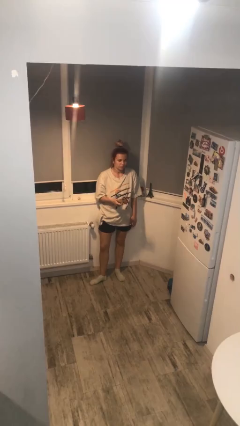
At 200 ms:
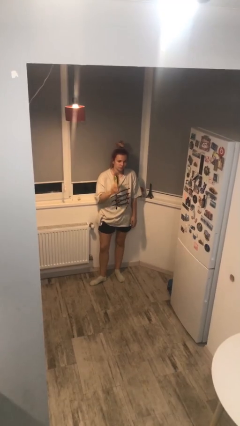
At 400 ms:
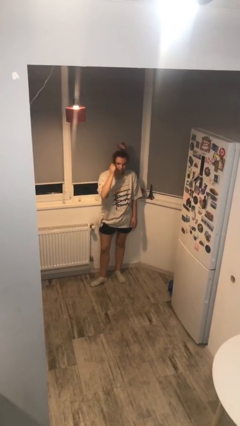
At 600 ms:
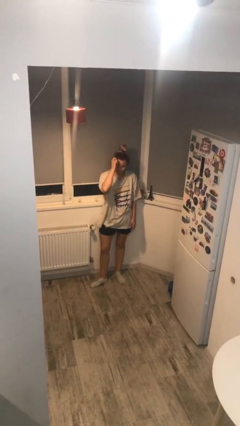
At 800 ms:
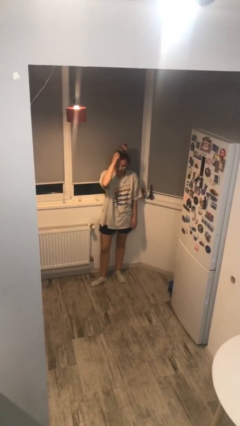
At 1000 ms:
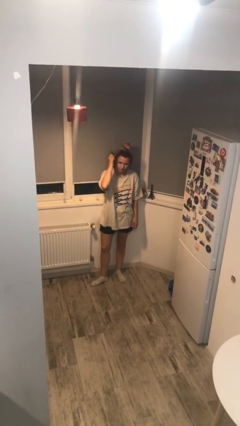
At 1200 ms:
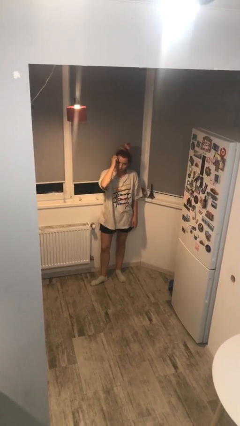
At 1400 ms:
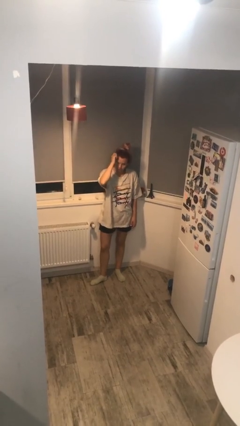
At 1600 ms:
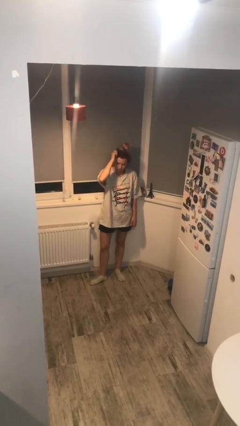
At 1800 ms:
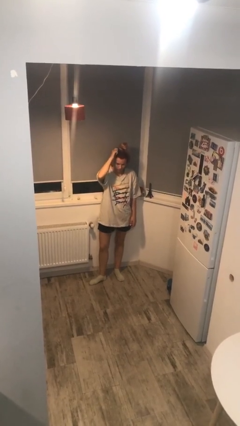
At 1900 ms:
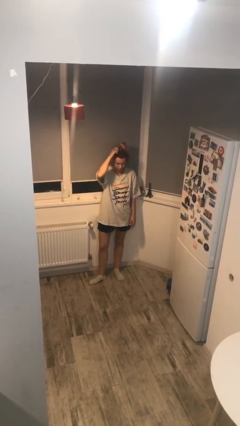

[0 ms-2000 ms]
person brushes hair

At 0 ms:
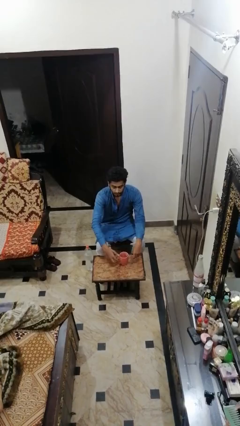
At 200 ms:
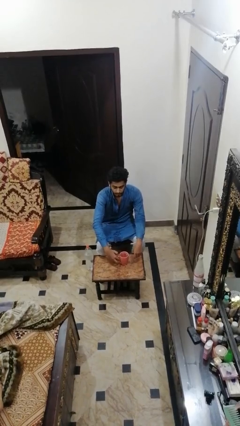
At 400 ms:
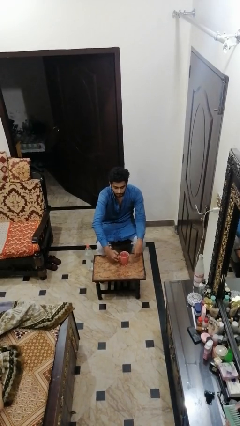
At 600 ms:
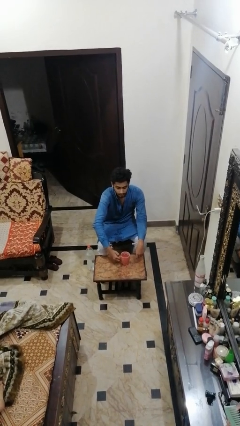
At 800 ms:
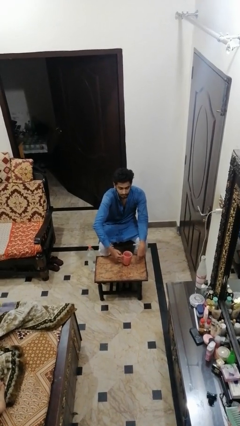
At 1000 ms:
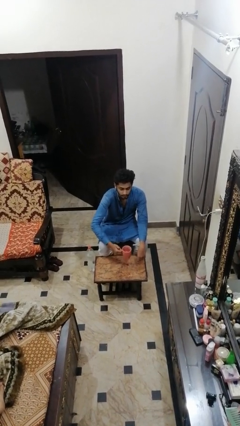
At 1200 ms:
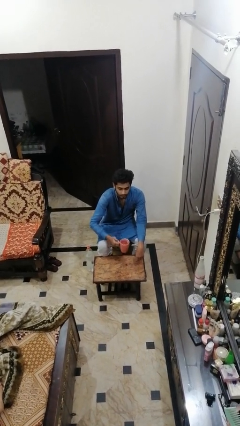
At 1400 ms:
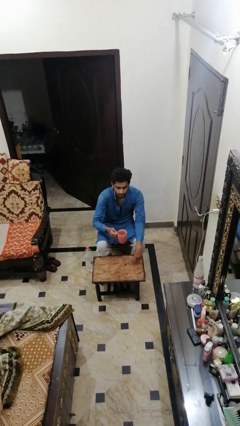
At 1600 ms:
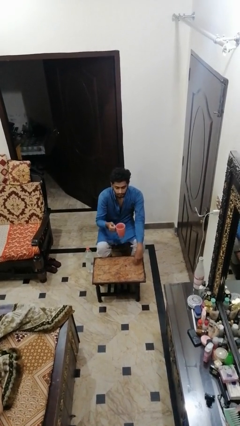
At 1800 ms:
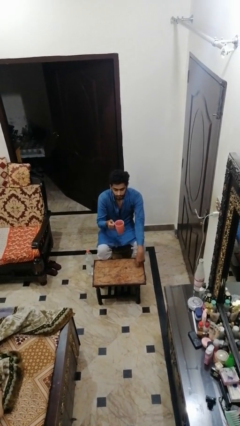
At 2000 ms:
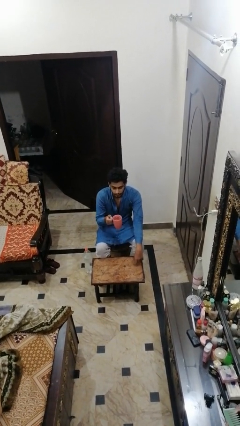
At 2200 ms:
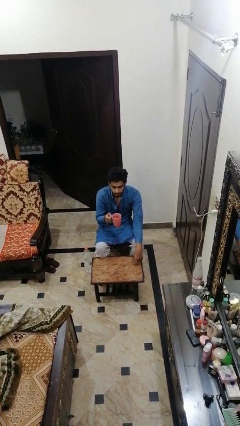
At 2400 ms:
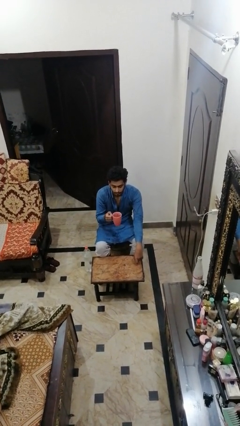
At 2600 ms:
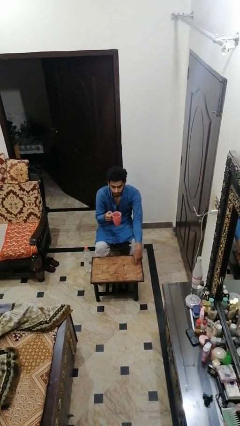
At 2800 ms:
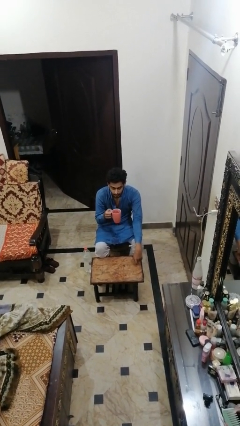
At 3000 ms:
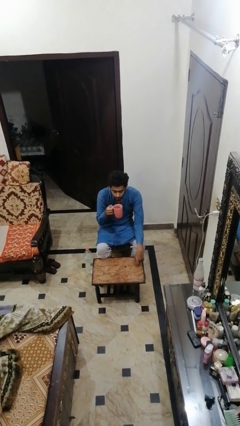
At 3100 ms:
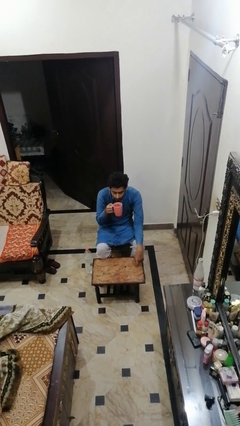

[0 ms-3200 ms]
person picks up object from table

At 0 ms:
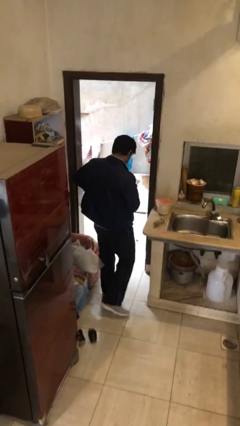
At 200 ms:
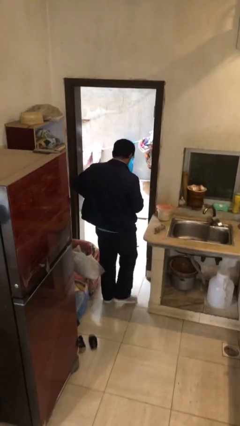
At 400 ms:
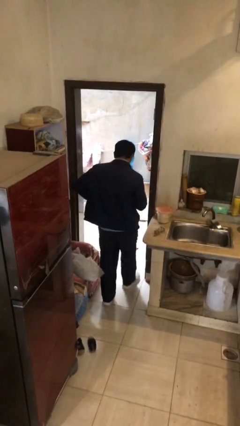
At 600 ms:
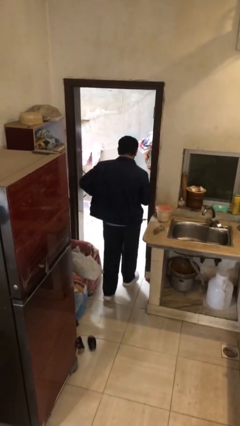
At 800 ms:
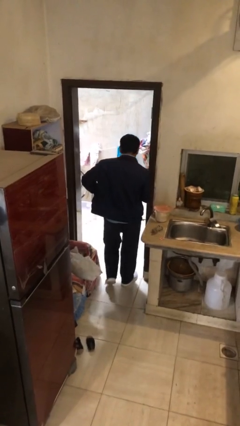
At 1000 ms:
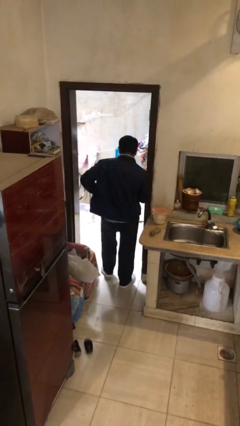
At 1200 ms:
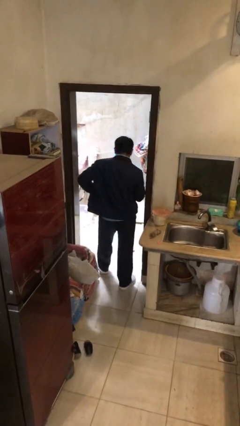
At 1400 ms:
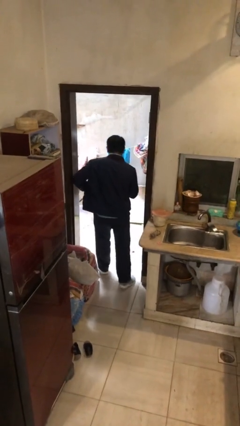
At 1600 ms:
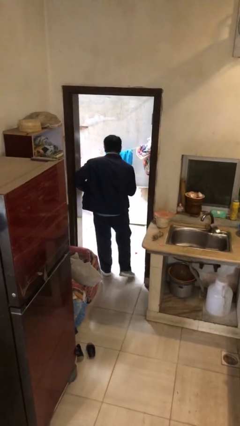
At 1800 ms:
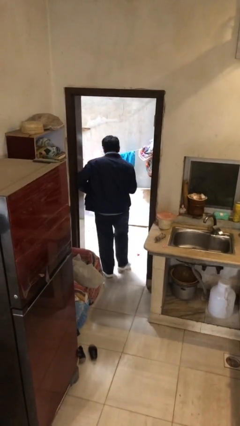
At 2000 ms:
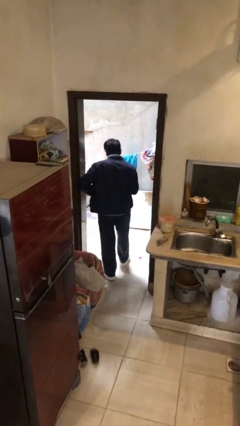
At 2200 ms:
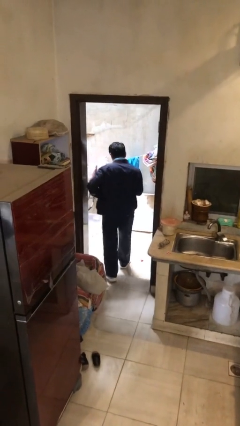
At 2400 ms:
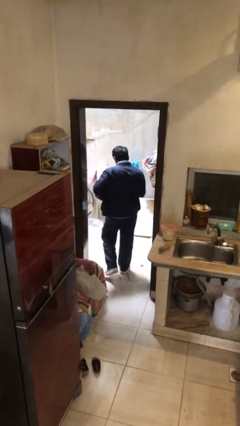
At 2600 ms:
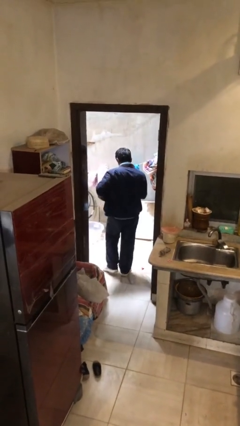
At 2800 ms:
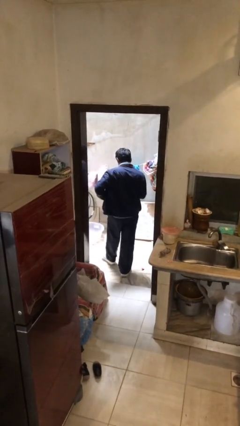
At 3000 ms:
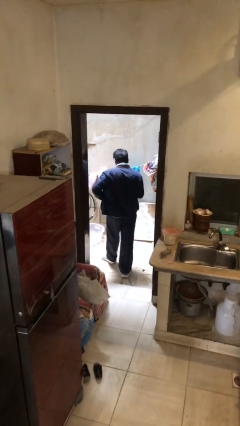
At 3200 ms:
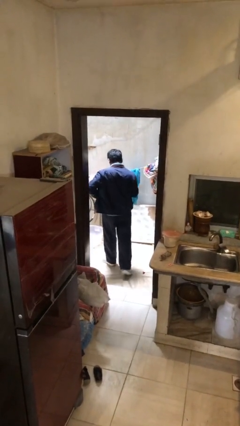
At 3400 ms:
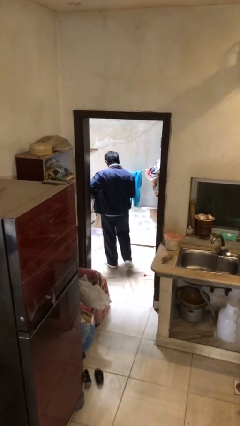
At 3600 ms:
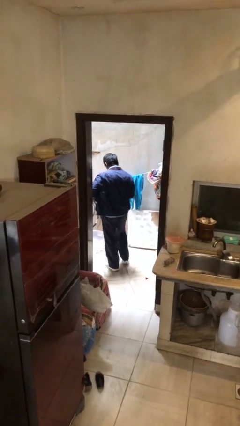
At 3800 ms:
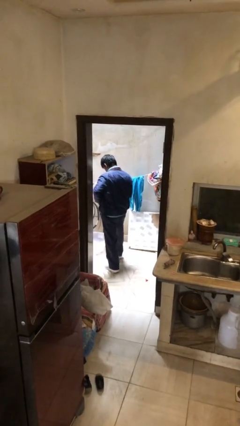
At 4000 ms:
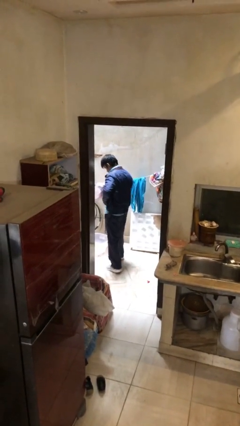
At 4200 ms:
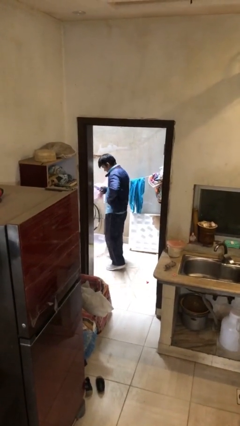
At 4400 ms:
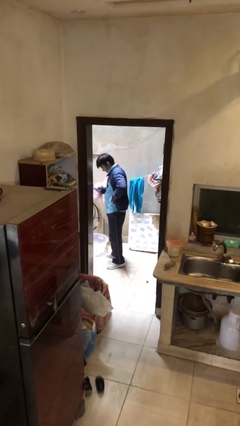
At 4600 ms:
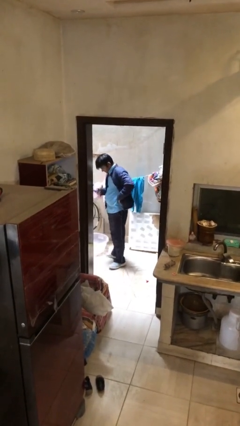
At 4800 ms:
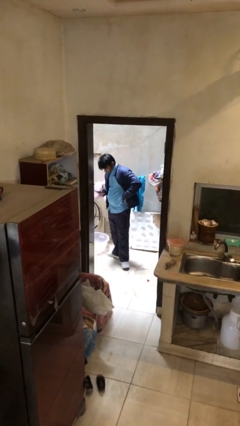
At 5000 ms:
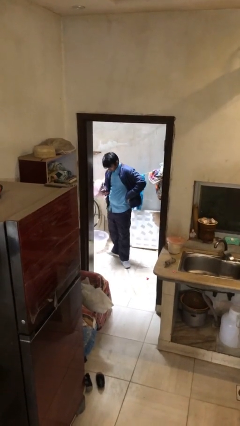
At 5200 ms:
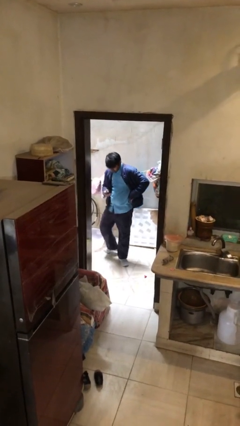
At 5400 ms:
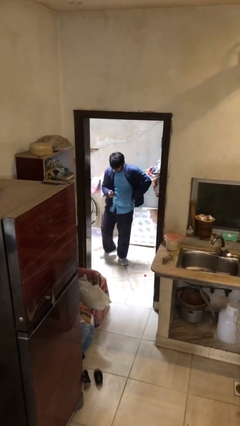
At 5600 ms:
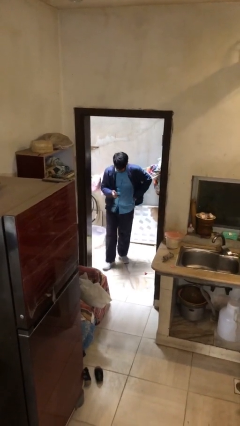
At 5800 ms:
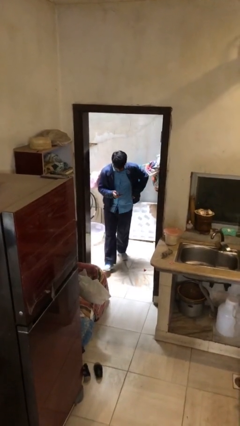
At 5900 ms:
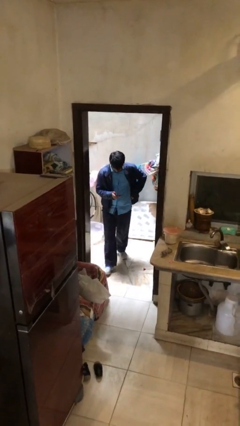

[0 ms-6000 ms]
person exits scene through structure

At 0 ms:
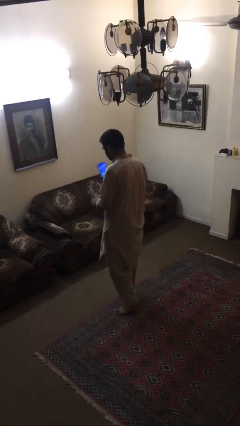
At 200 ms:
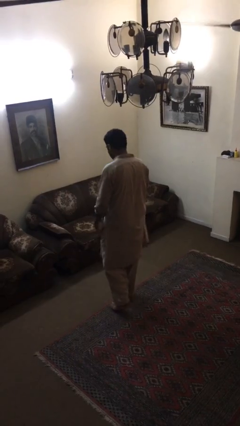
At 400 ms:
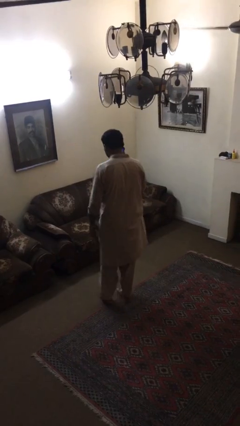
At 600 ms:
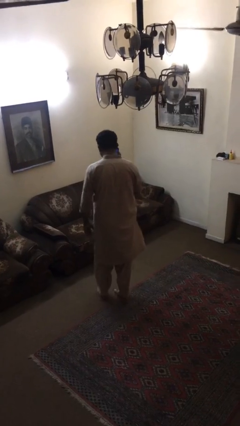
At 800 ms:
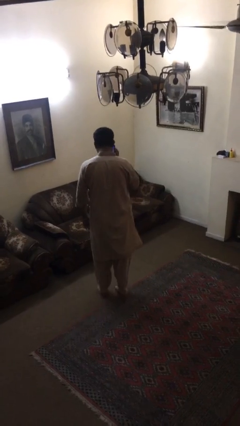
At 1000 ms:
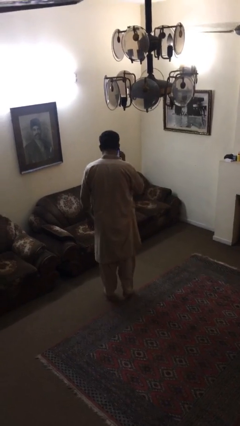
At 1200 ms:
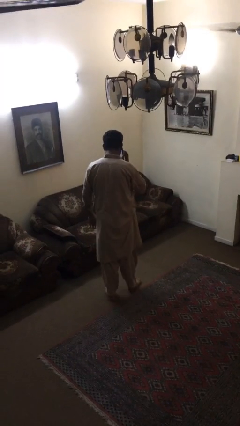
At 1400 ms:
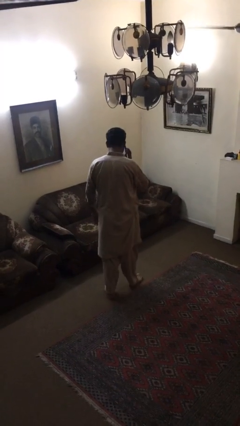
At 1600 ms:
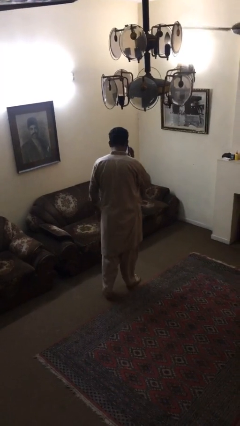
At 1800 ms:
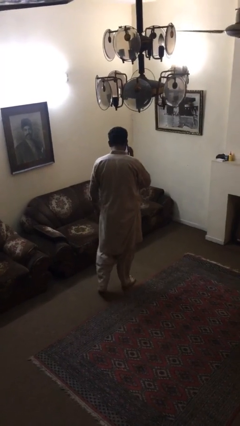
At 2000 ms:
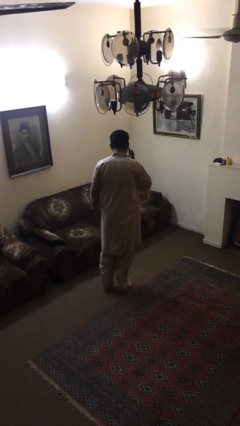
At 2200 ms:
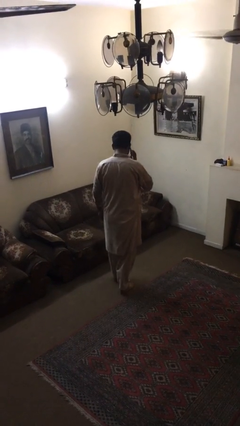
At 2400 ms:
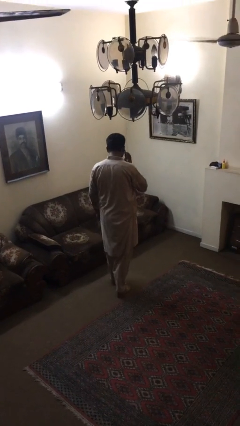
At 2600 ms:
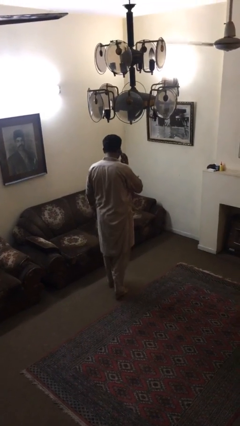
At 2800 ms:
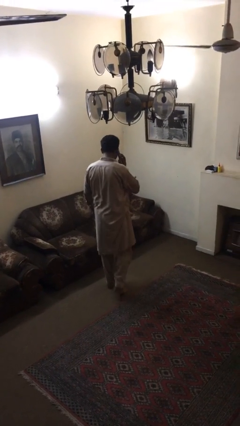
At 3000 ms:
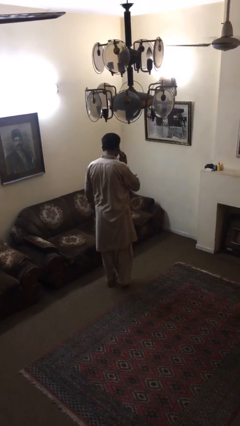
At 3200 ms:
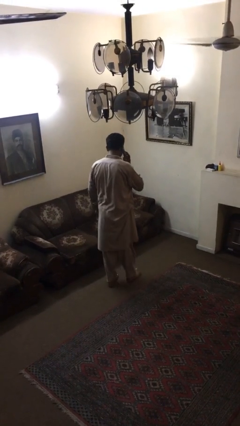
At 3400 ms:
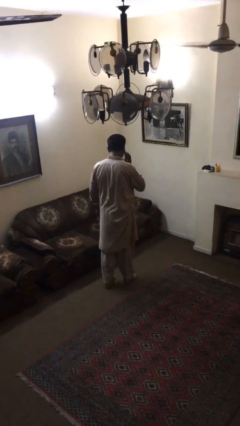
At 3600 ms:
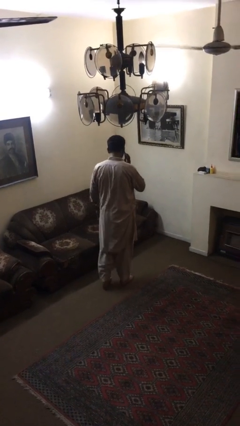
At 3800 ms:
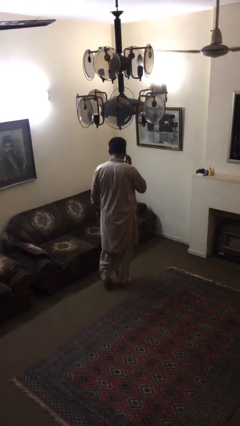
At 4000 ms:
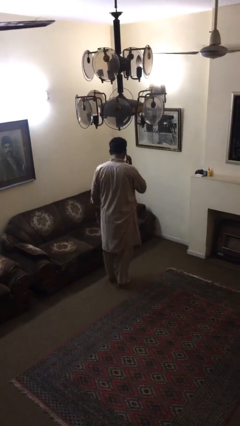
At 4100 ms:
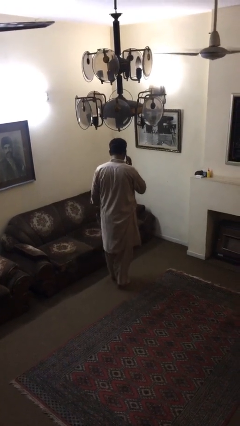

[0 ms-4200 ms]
person talks on phone

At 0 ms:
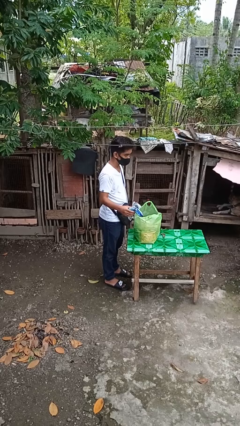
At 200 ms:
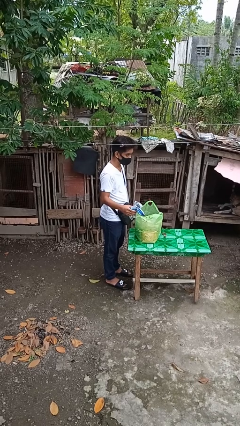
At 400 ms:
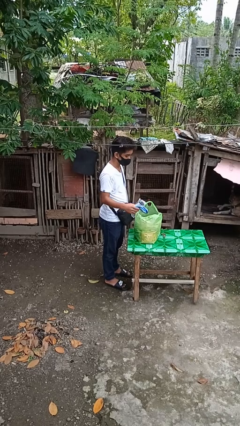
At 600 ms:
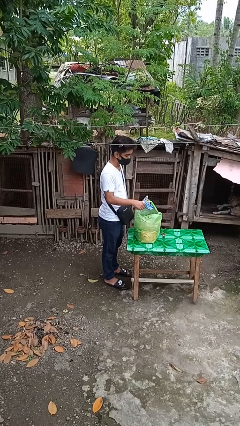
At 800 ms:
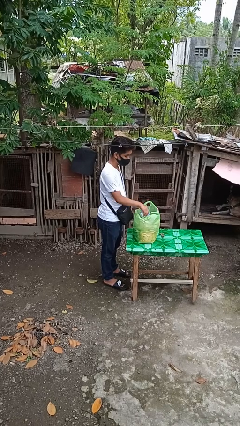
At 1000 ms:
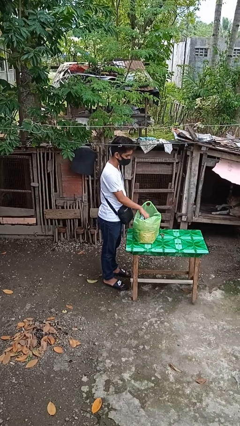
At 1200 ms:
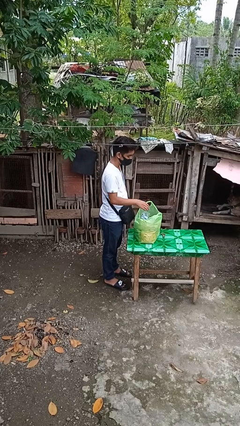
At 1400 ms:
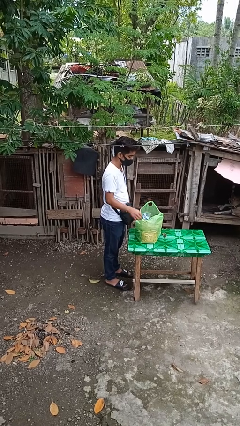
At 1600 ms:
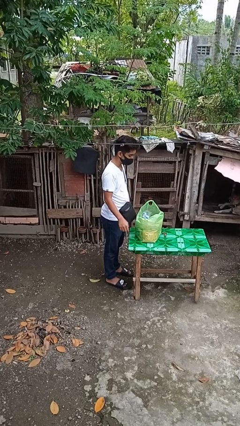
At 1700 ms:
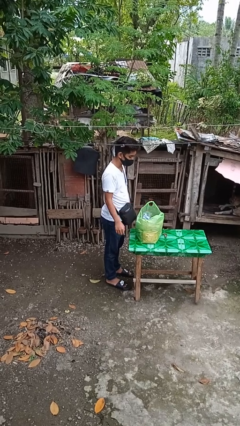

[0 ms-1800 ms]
person puts object into bag

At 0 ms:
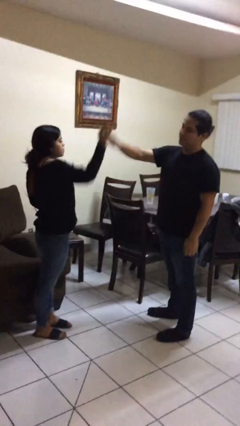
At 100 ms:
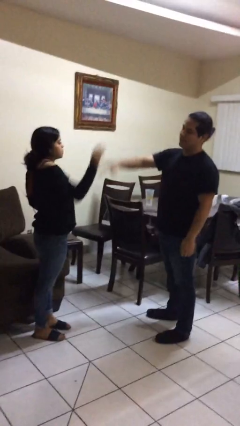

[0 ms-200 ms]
person highfives hand
